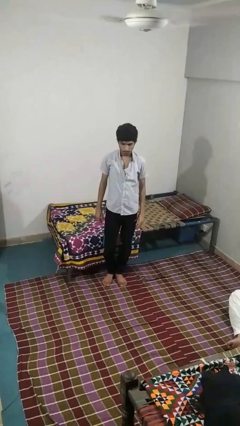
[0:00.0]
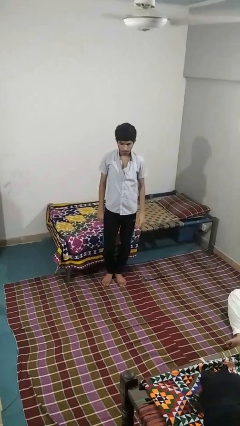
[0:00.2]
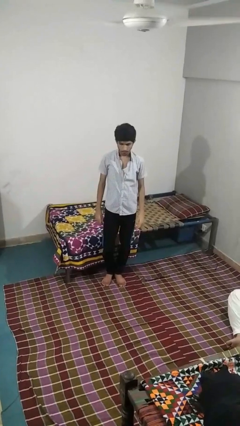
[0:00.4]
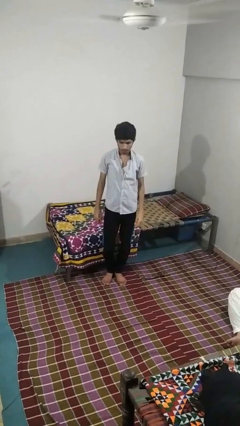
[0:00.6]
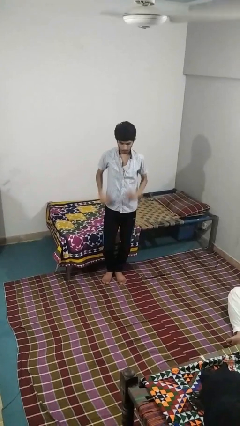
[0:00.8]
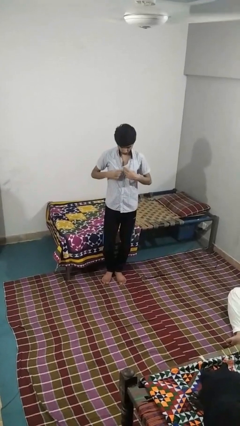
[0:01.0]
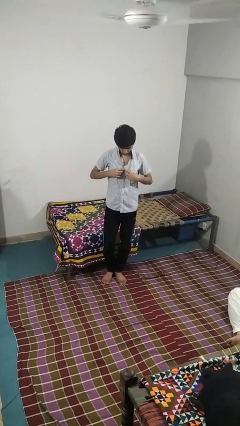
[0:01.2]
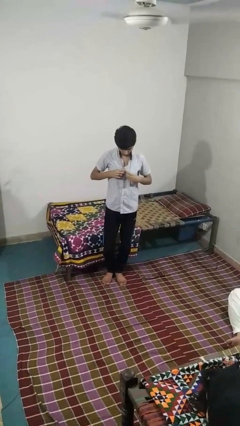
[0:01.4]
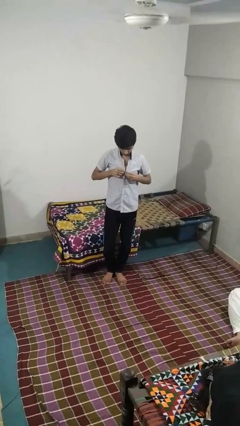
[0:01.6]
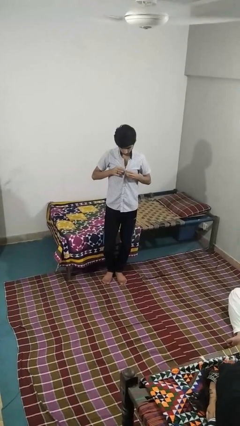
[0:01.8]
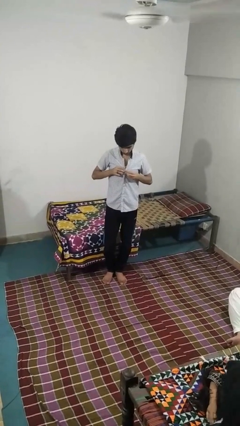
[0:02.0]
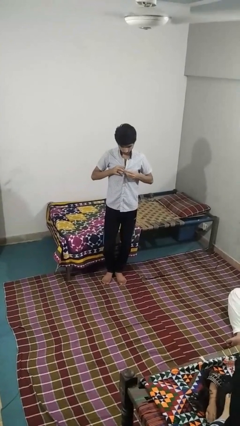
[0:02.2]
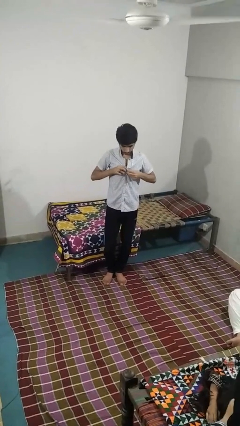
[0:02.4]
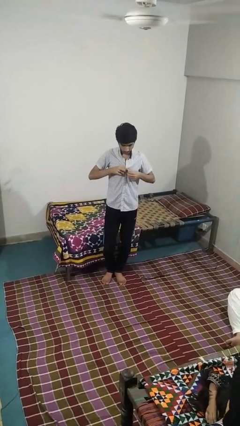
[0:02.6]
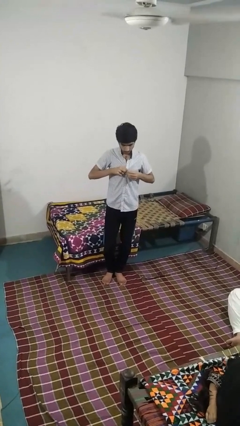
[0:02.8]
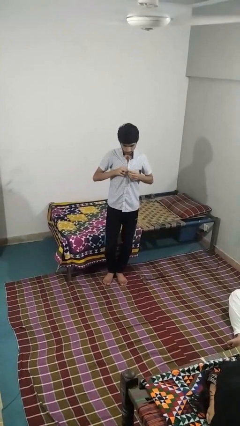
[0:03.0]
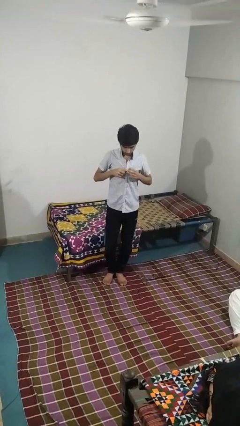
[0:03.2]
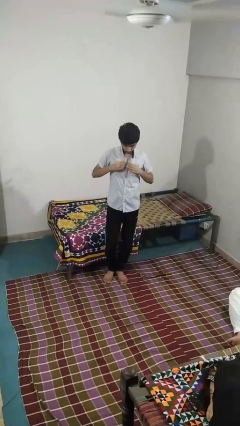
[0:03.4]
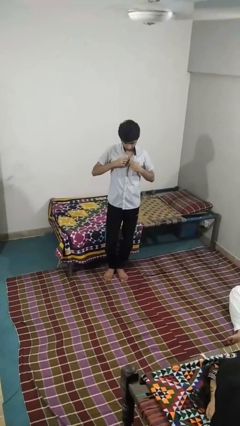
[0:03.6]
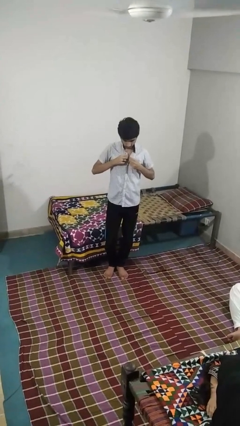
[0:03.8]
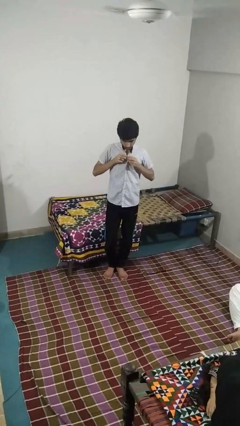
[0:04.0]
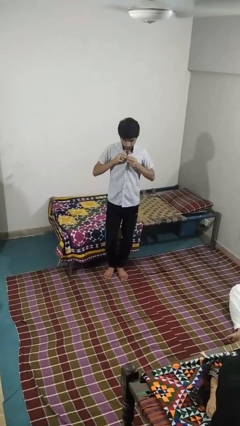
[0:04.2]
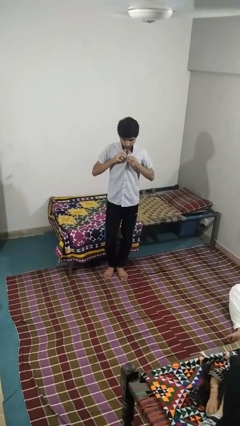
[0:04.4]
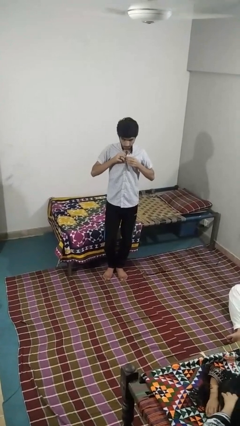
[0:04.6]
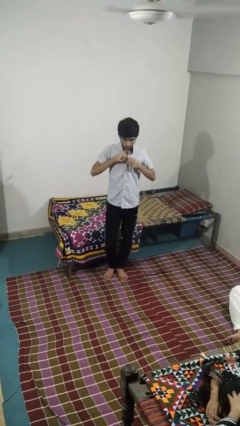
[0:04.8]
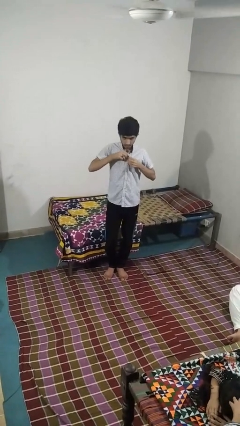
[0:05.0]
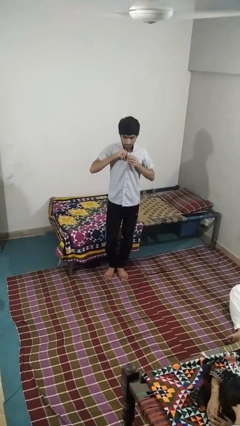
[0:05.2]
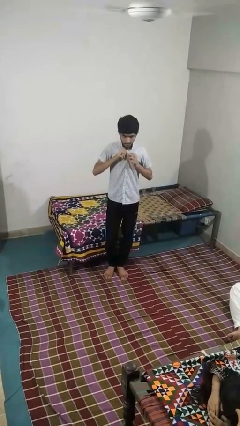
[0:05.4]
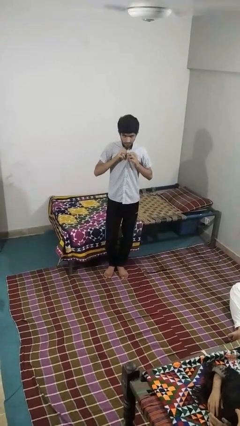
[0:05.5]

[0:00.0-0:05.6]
person buttons shirt

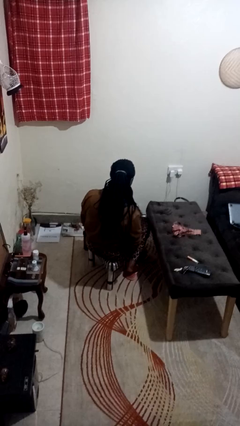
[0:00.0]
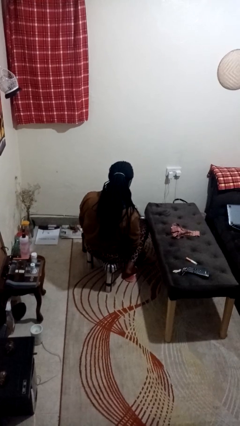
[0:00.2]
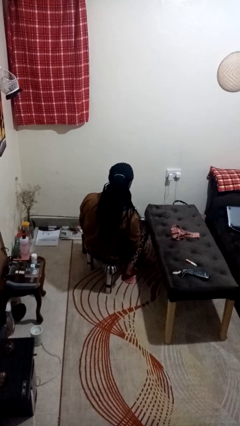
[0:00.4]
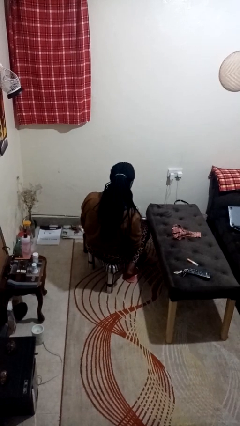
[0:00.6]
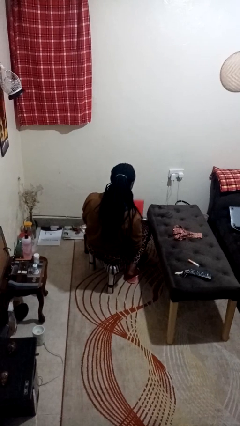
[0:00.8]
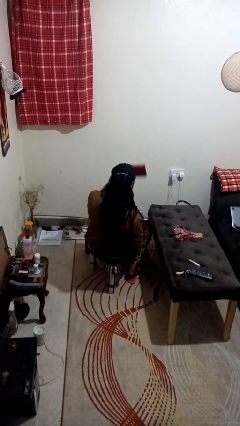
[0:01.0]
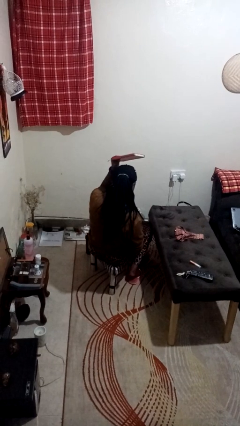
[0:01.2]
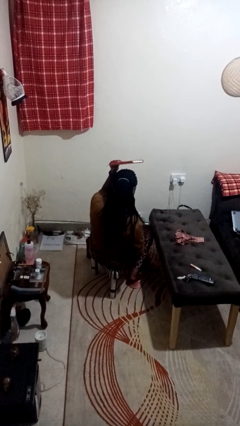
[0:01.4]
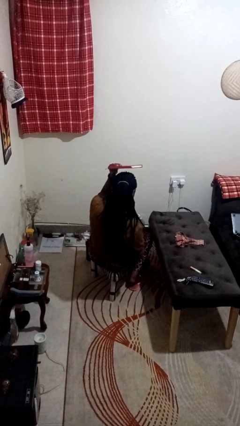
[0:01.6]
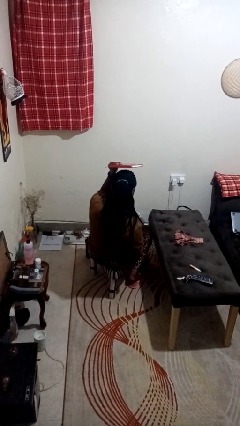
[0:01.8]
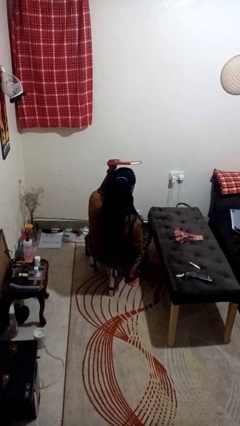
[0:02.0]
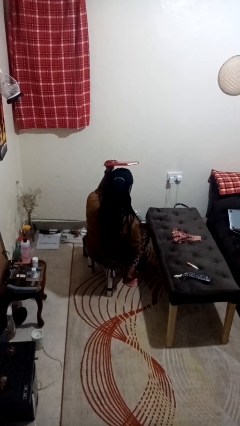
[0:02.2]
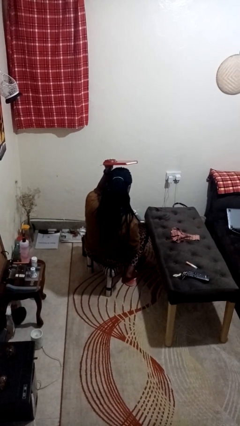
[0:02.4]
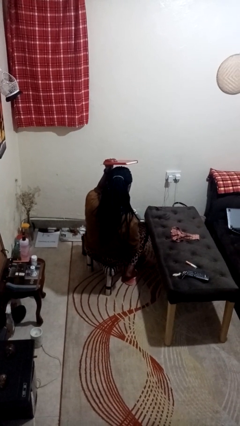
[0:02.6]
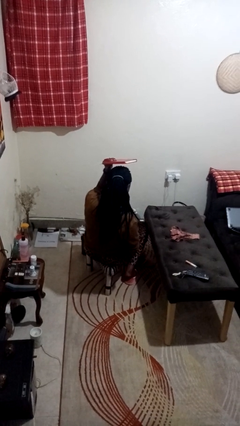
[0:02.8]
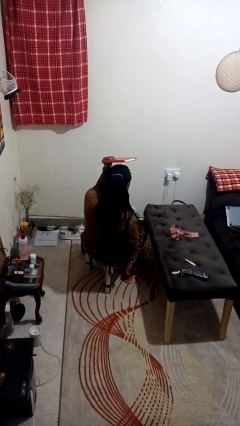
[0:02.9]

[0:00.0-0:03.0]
person holds object above head

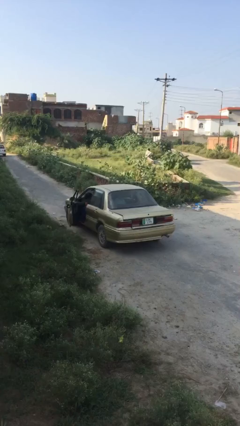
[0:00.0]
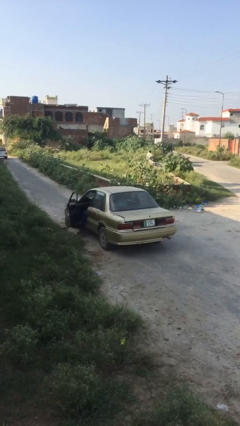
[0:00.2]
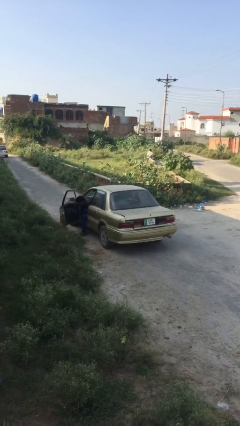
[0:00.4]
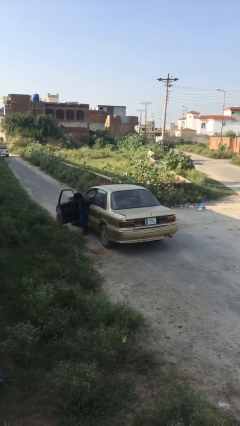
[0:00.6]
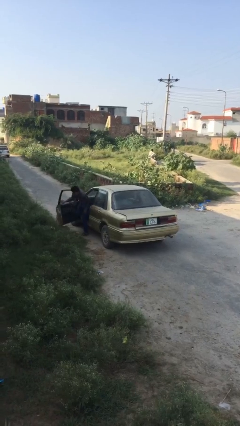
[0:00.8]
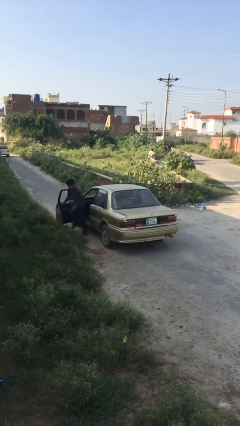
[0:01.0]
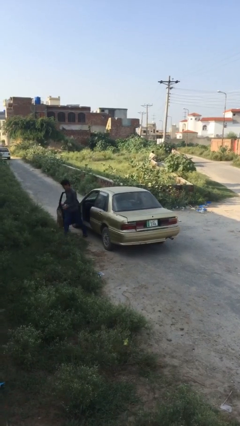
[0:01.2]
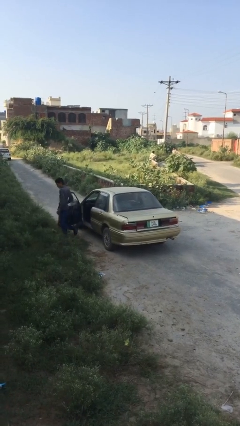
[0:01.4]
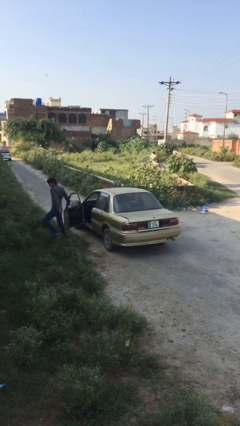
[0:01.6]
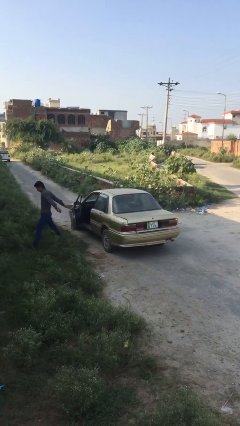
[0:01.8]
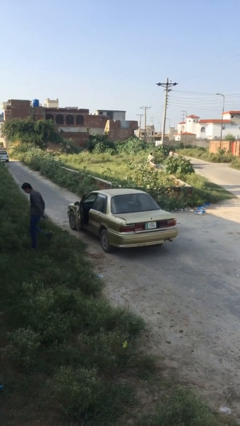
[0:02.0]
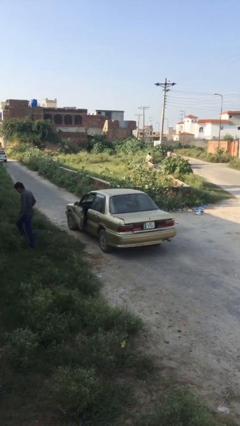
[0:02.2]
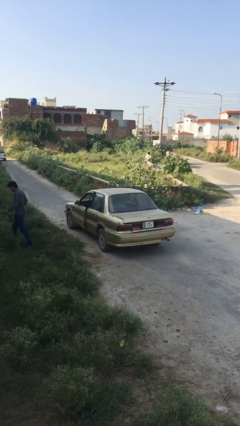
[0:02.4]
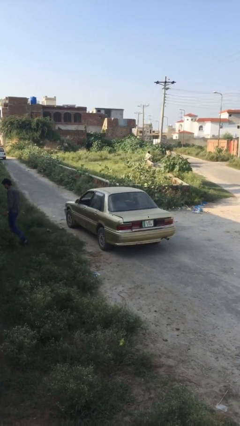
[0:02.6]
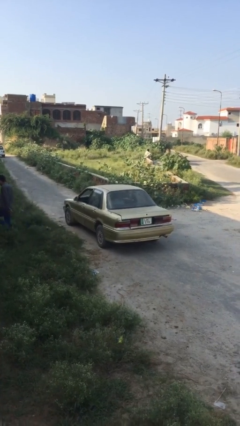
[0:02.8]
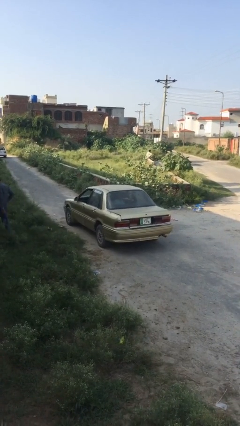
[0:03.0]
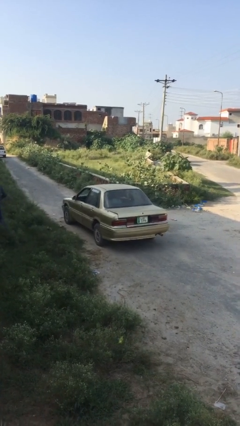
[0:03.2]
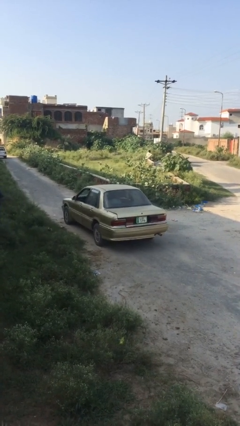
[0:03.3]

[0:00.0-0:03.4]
car drops off person

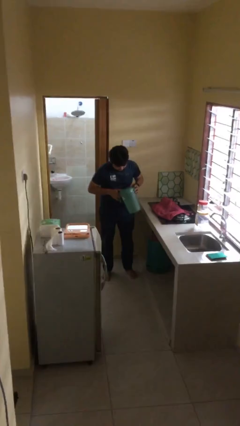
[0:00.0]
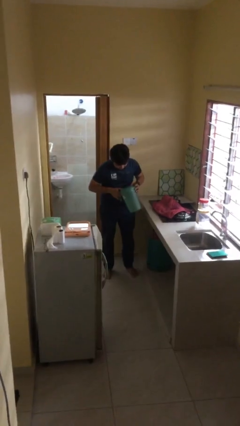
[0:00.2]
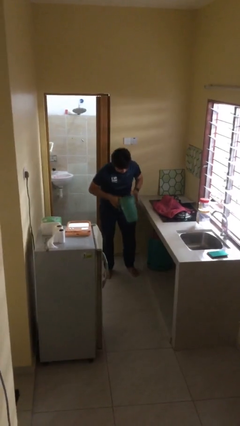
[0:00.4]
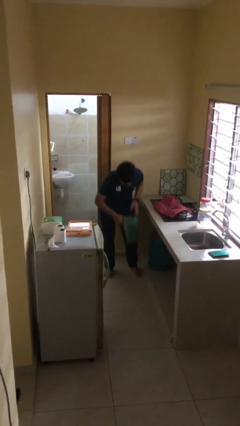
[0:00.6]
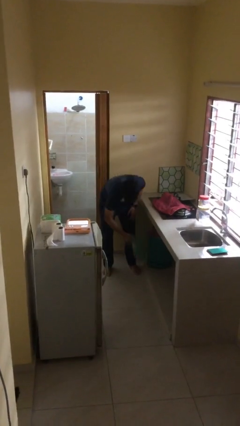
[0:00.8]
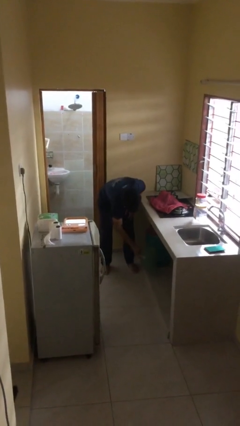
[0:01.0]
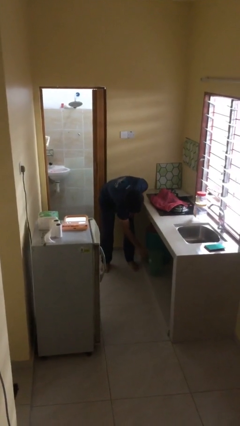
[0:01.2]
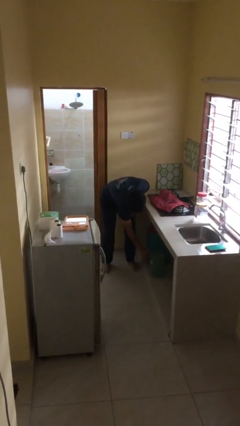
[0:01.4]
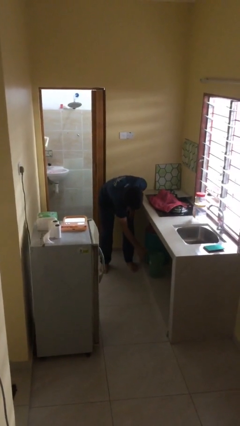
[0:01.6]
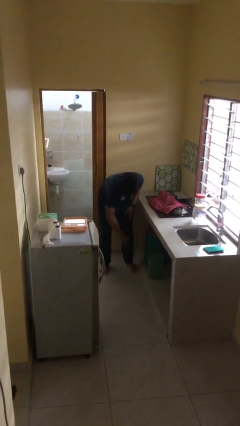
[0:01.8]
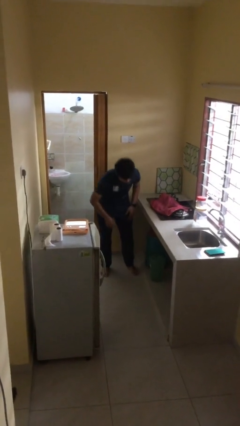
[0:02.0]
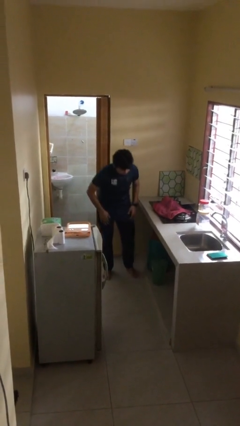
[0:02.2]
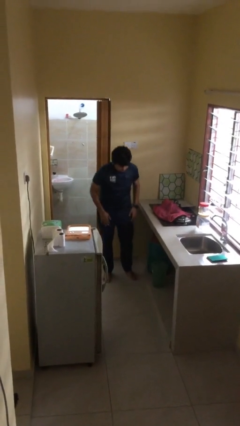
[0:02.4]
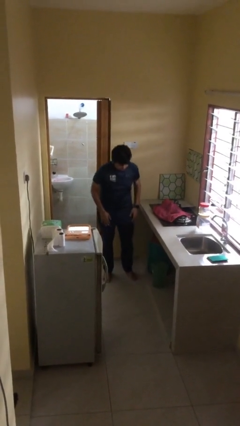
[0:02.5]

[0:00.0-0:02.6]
person puts down object into cabinet

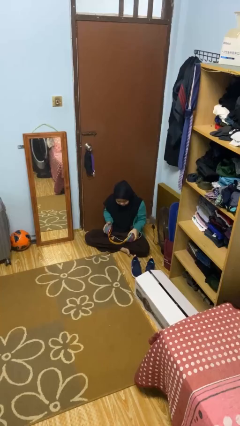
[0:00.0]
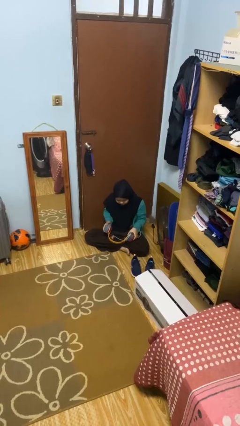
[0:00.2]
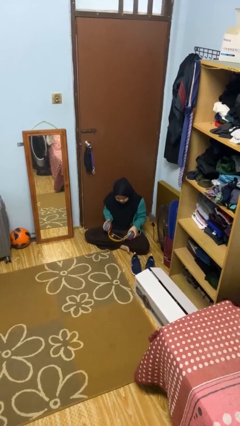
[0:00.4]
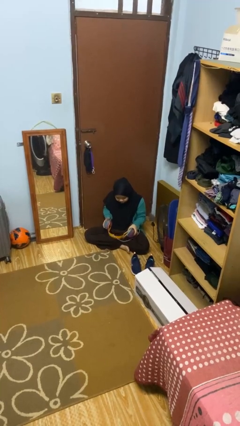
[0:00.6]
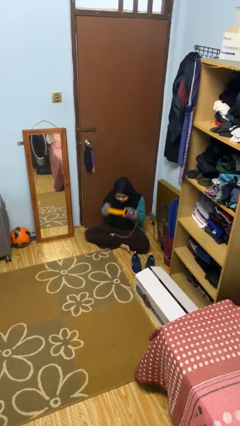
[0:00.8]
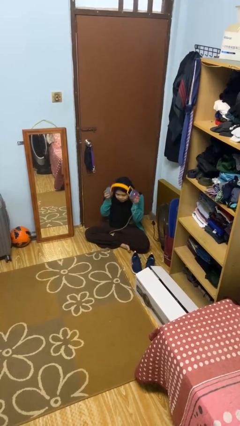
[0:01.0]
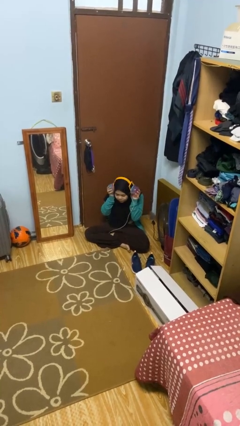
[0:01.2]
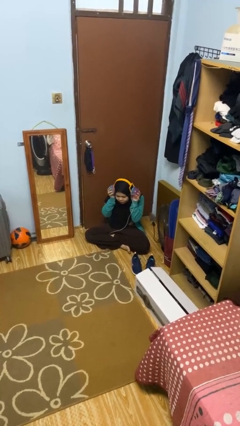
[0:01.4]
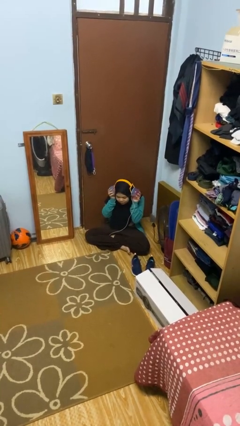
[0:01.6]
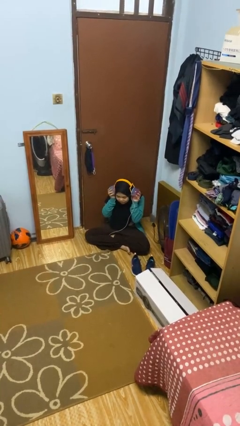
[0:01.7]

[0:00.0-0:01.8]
person puts on headphones

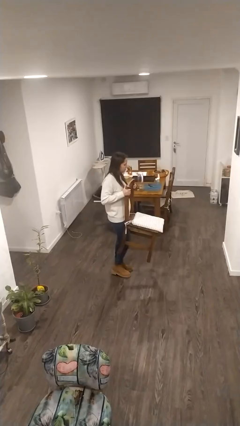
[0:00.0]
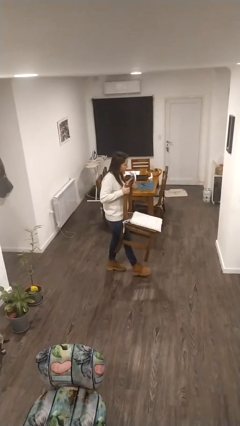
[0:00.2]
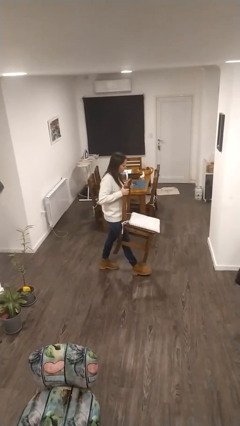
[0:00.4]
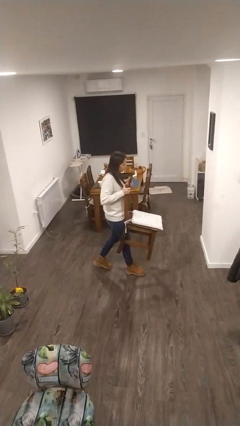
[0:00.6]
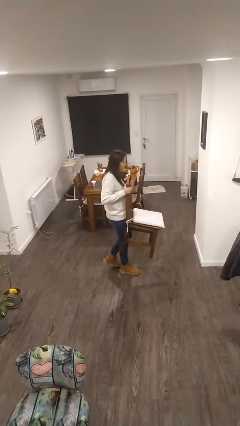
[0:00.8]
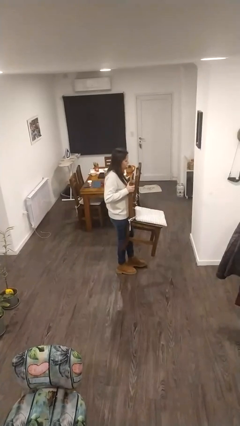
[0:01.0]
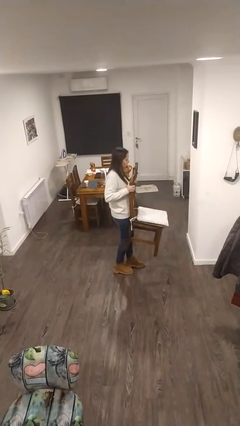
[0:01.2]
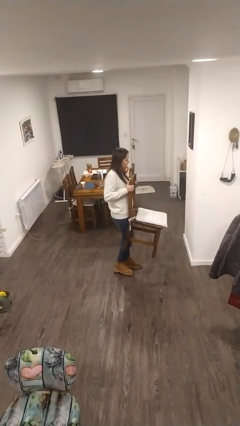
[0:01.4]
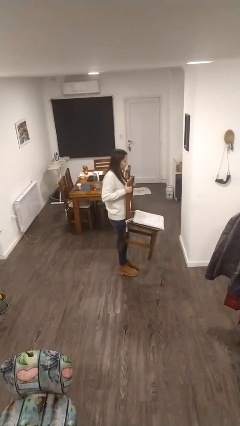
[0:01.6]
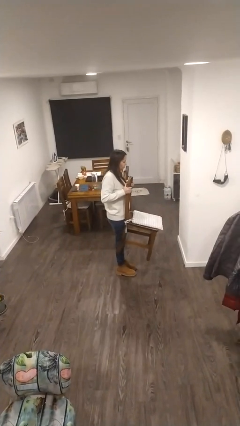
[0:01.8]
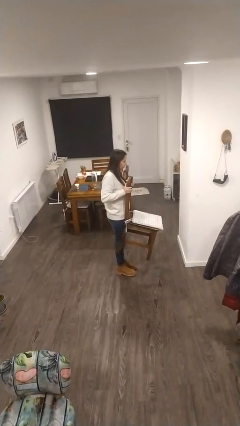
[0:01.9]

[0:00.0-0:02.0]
person carries furniture
